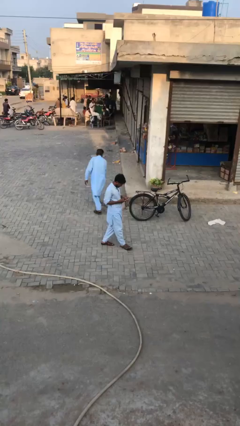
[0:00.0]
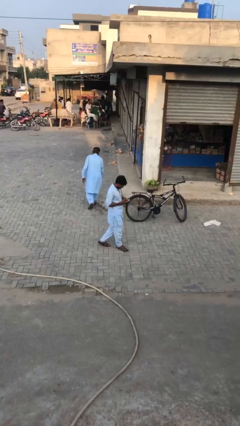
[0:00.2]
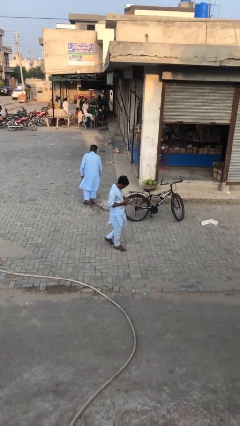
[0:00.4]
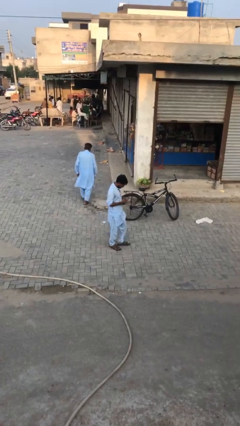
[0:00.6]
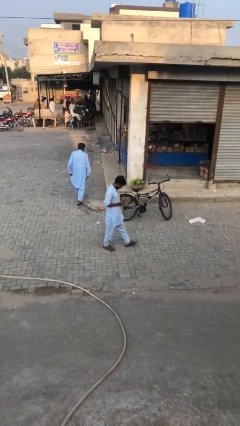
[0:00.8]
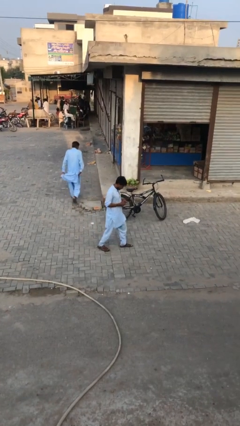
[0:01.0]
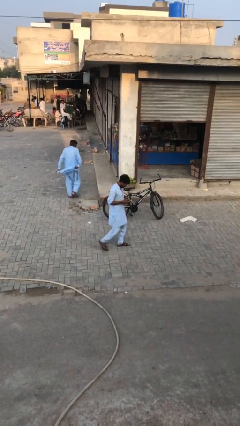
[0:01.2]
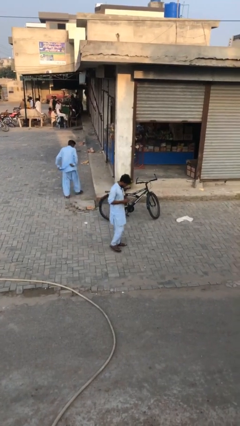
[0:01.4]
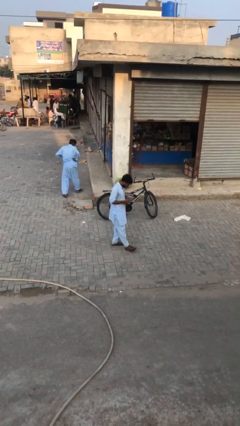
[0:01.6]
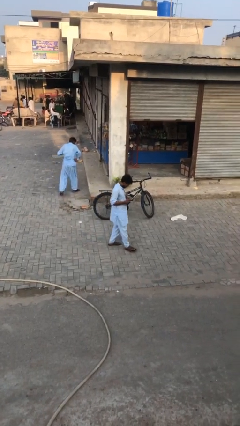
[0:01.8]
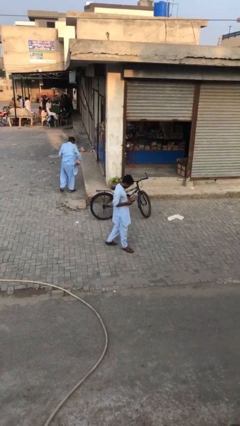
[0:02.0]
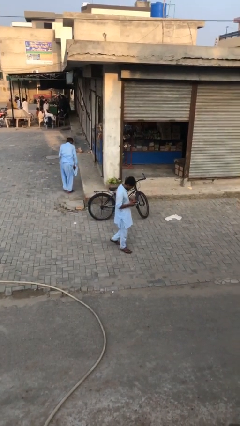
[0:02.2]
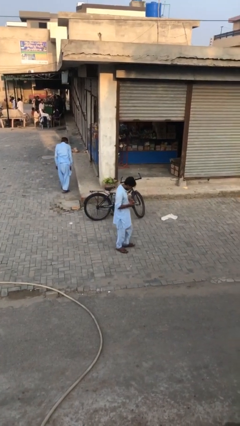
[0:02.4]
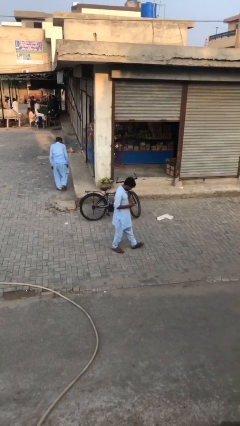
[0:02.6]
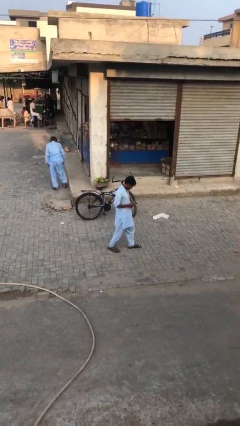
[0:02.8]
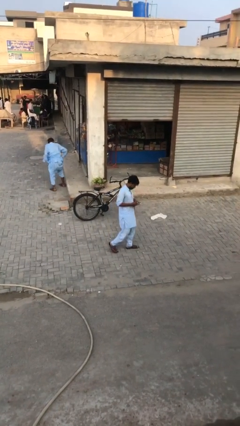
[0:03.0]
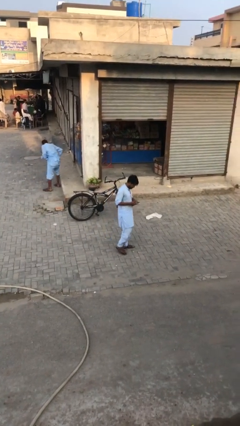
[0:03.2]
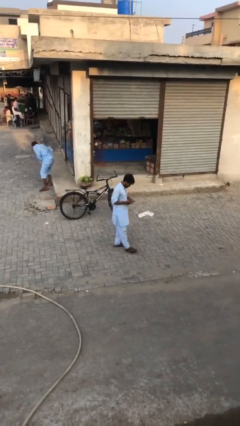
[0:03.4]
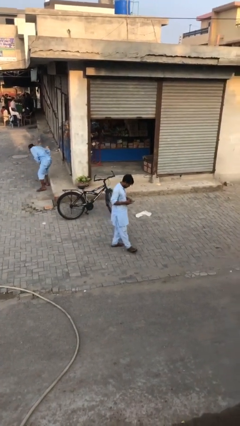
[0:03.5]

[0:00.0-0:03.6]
person texts on phone

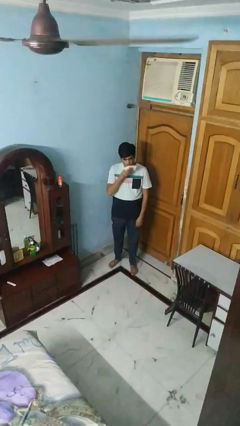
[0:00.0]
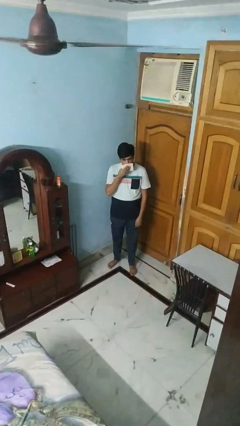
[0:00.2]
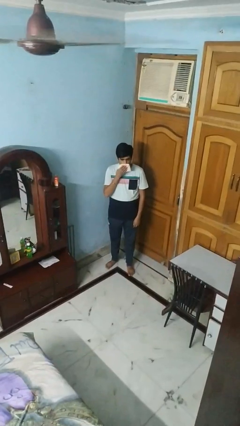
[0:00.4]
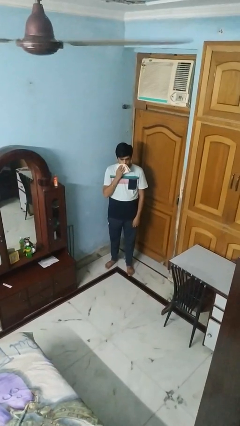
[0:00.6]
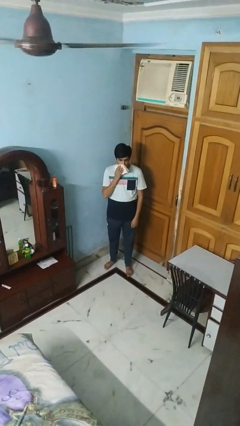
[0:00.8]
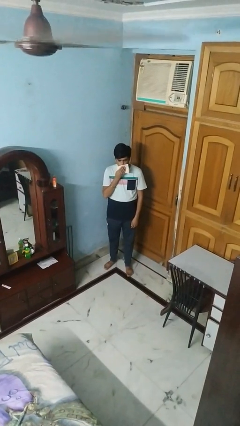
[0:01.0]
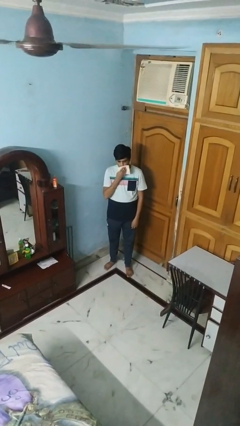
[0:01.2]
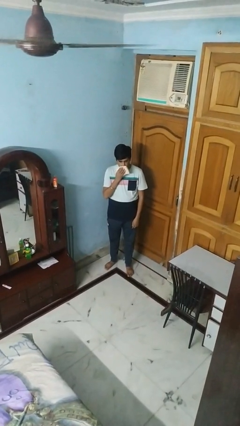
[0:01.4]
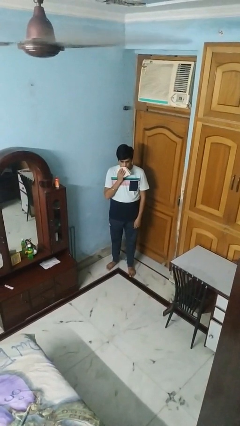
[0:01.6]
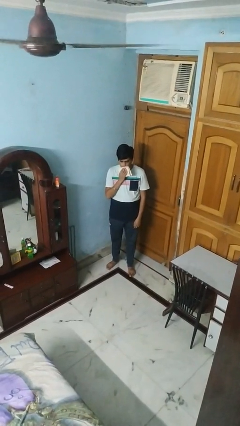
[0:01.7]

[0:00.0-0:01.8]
person wipes mouth with napkin

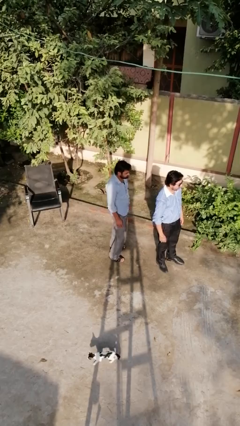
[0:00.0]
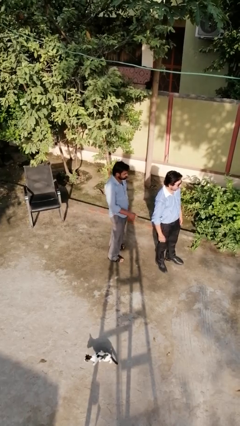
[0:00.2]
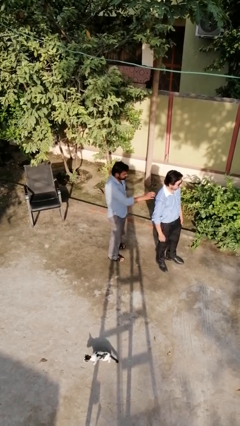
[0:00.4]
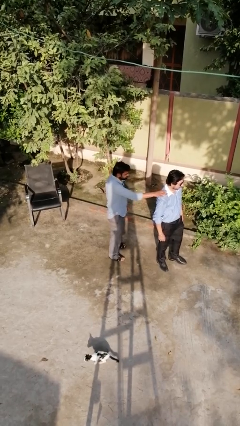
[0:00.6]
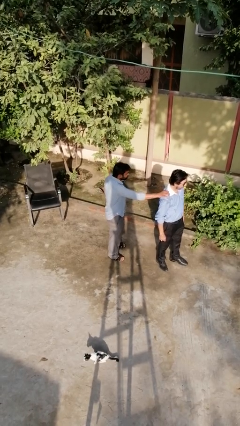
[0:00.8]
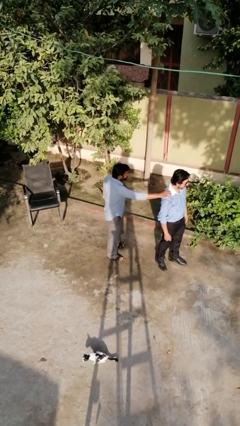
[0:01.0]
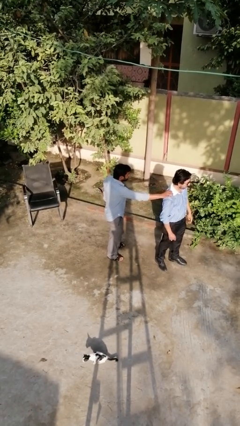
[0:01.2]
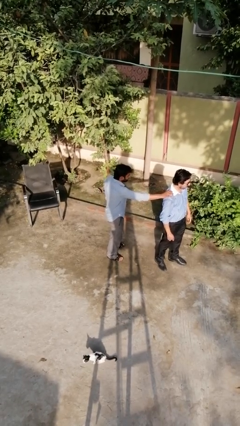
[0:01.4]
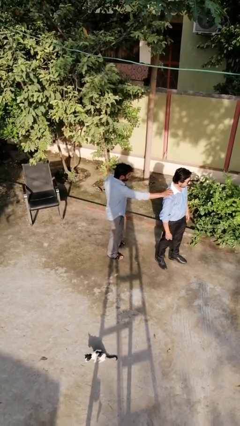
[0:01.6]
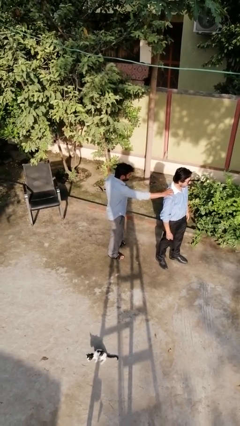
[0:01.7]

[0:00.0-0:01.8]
person grabs person by shoulder

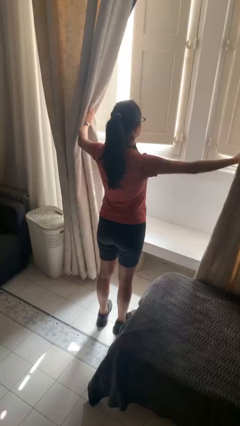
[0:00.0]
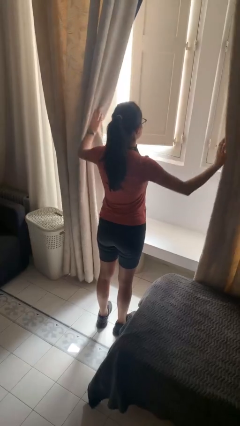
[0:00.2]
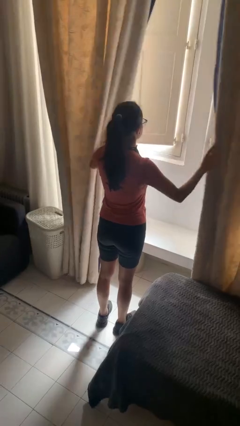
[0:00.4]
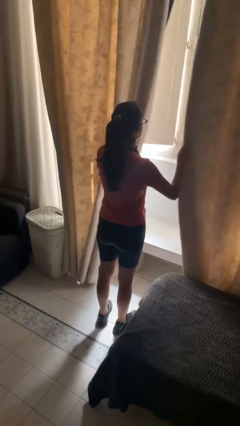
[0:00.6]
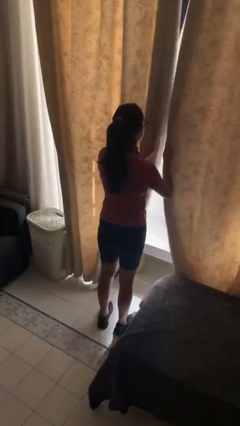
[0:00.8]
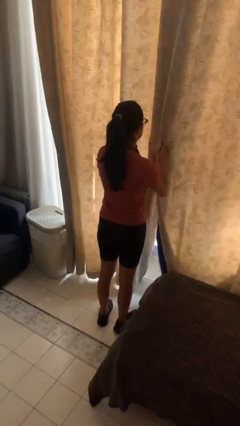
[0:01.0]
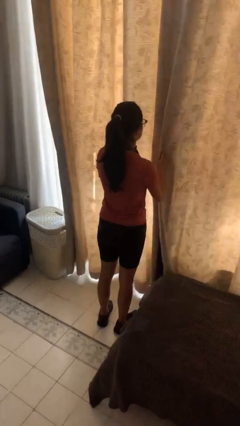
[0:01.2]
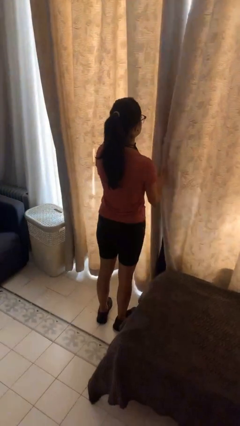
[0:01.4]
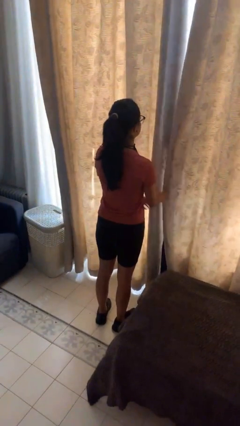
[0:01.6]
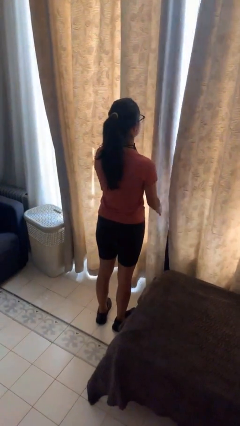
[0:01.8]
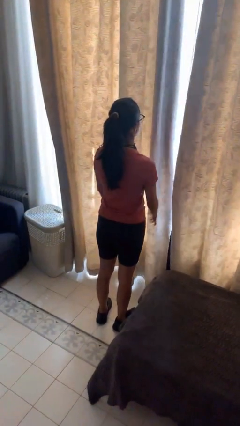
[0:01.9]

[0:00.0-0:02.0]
person closes curtains

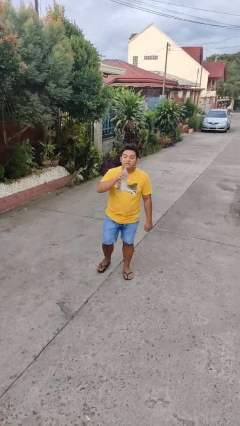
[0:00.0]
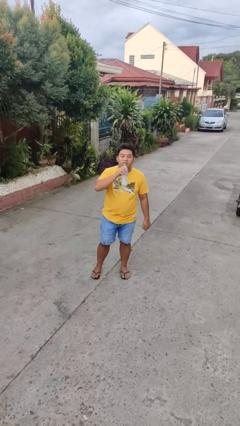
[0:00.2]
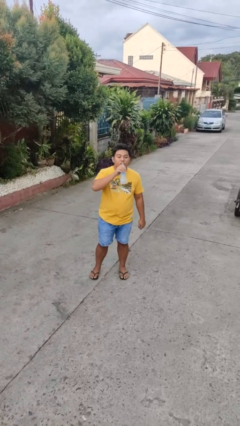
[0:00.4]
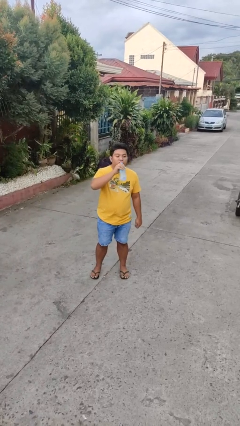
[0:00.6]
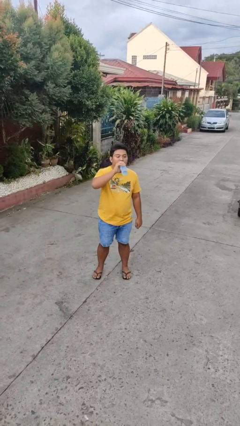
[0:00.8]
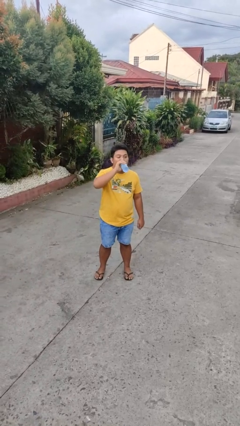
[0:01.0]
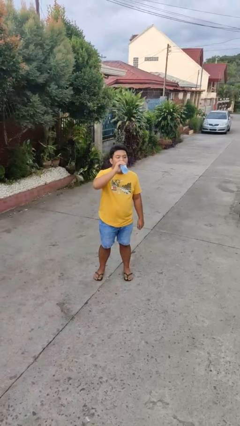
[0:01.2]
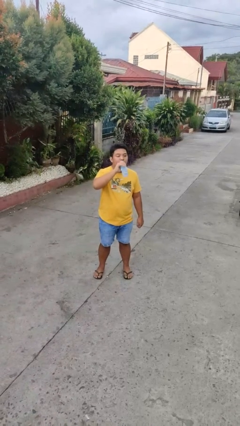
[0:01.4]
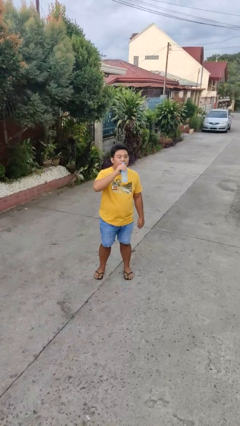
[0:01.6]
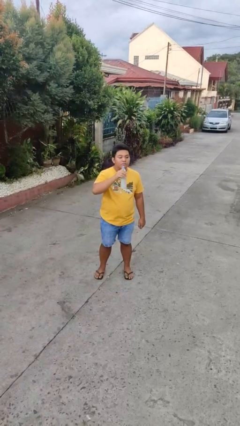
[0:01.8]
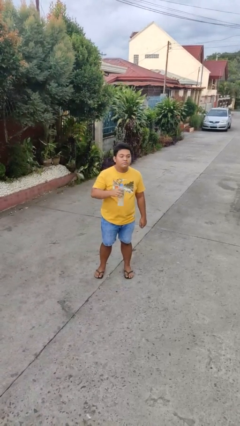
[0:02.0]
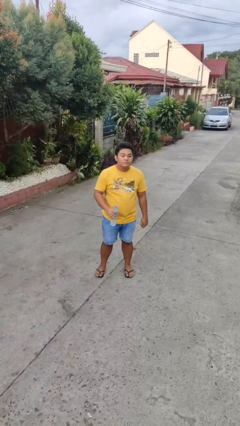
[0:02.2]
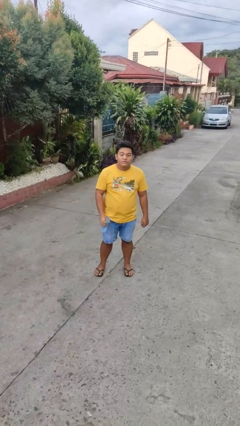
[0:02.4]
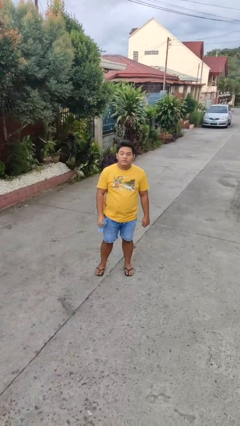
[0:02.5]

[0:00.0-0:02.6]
person drinks from bottle

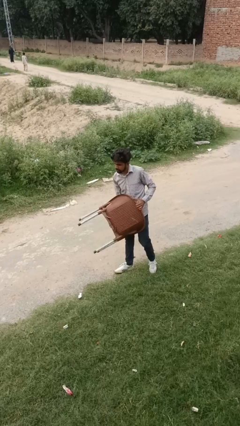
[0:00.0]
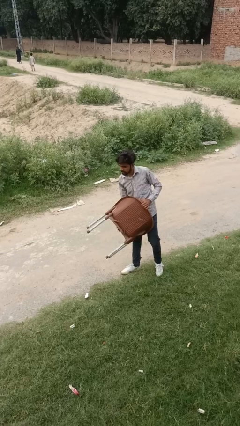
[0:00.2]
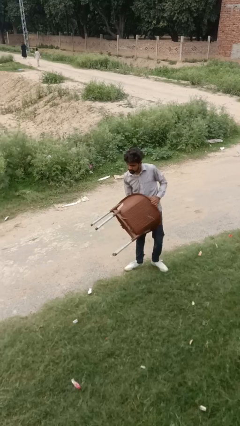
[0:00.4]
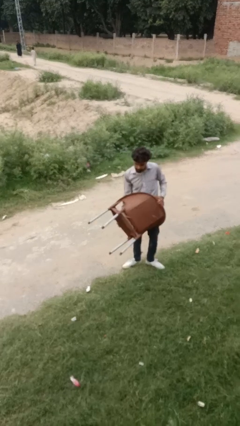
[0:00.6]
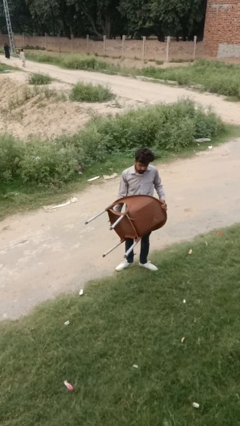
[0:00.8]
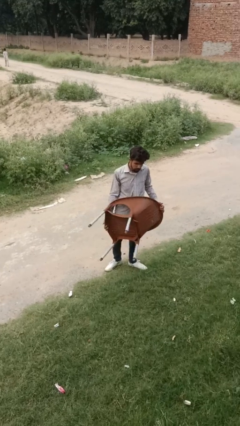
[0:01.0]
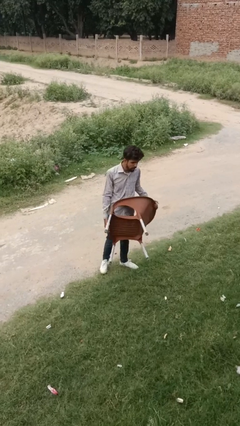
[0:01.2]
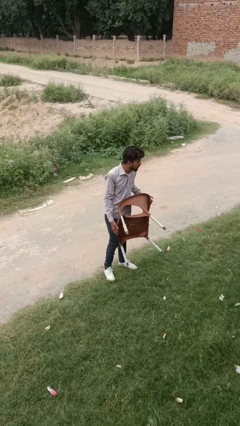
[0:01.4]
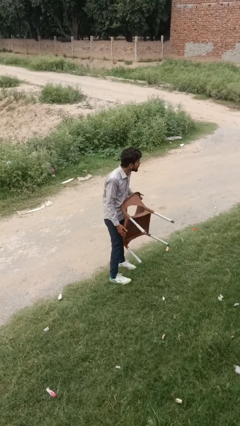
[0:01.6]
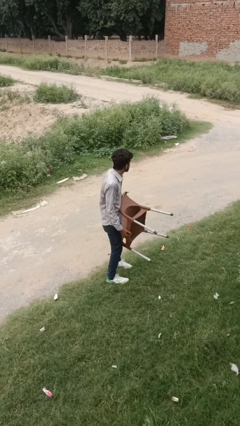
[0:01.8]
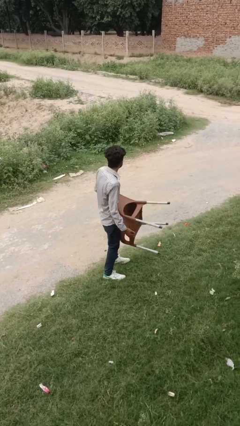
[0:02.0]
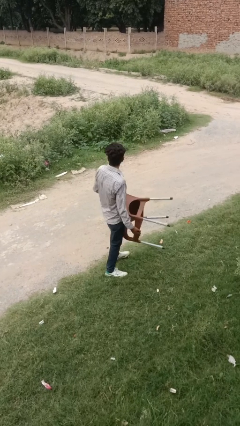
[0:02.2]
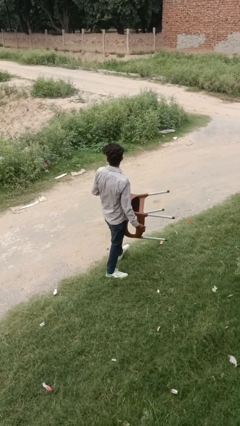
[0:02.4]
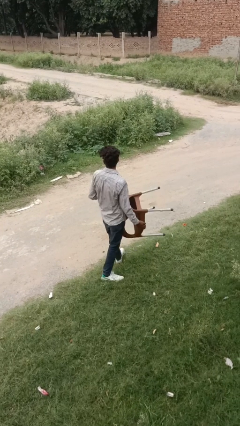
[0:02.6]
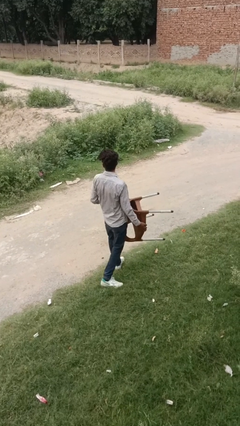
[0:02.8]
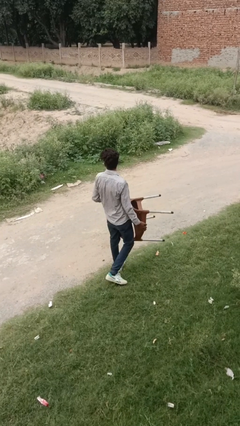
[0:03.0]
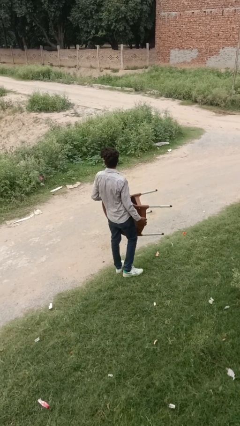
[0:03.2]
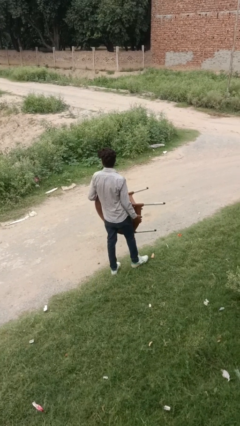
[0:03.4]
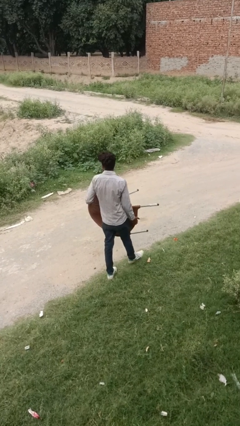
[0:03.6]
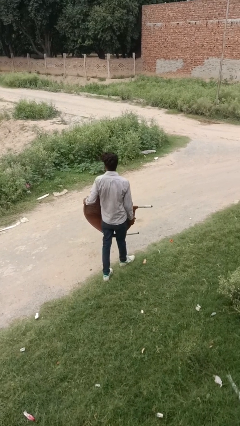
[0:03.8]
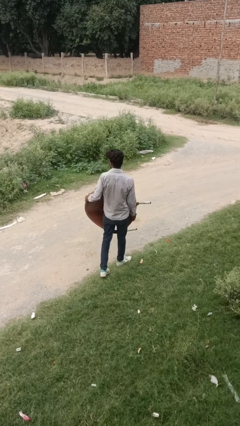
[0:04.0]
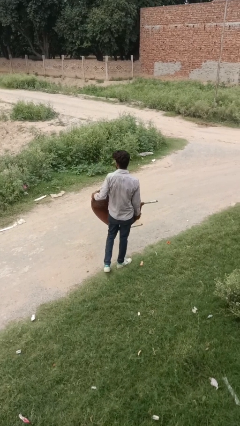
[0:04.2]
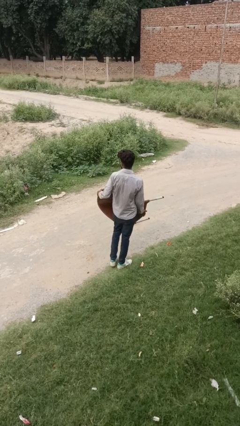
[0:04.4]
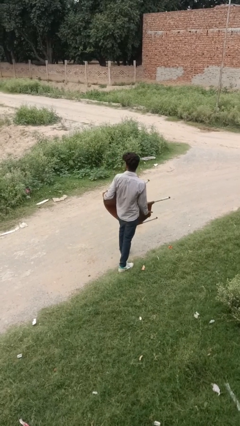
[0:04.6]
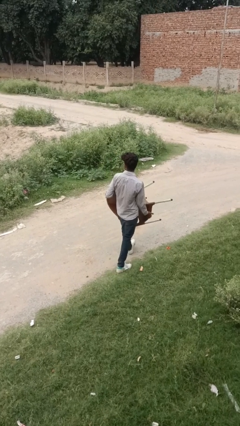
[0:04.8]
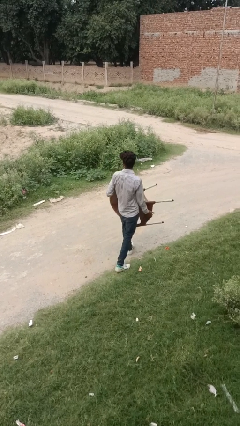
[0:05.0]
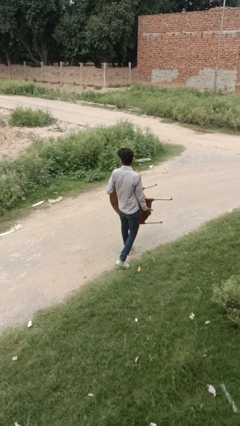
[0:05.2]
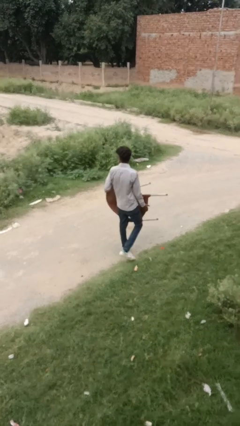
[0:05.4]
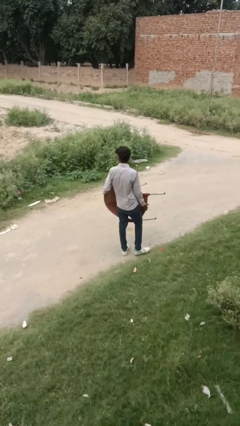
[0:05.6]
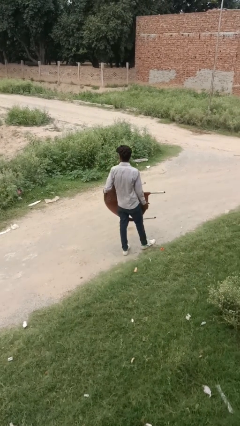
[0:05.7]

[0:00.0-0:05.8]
person carries furniture
